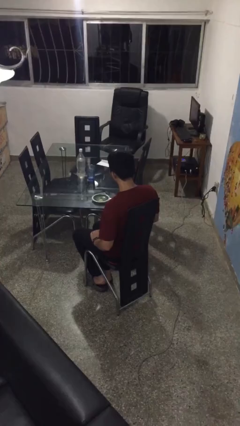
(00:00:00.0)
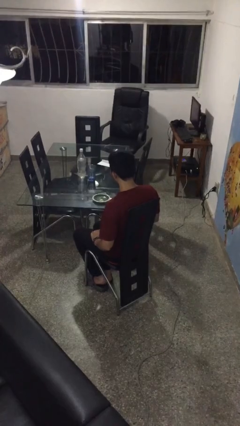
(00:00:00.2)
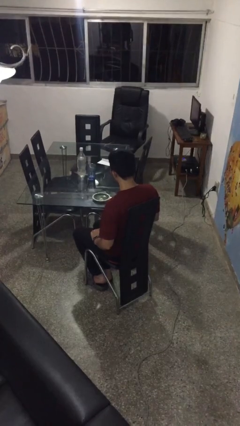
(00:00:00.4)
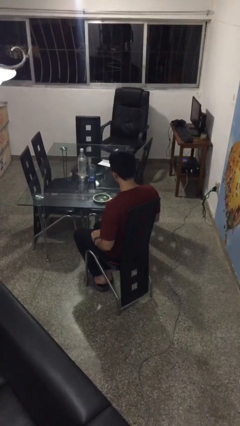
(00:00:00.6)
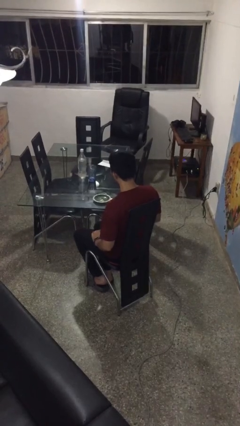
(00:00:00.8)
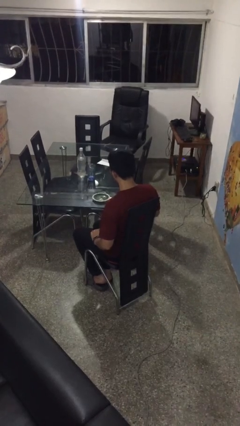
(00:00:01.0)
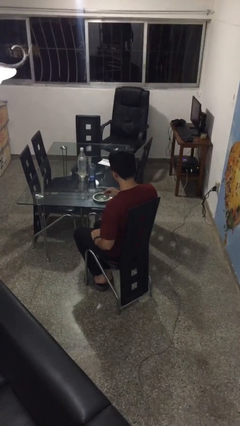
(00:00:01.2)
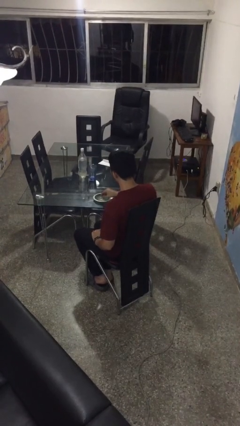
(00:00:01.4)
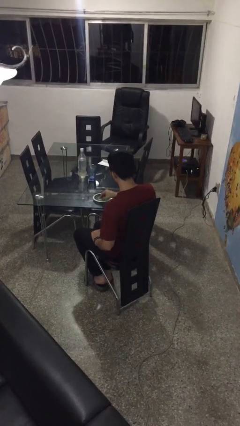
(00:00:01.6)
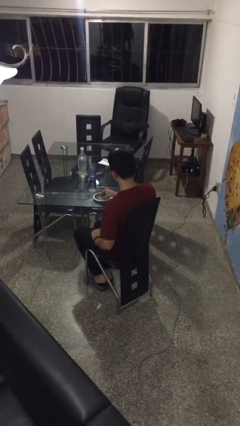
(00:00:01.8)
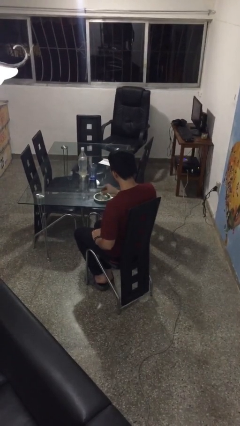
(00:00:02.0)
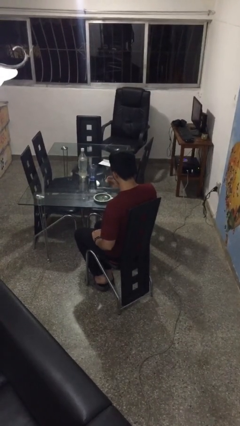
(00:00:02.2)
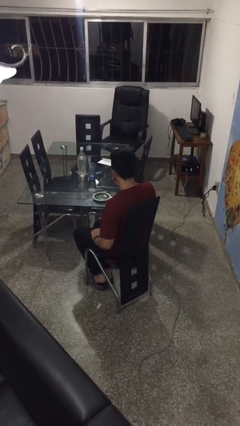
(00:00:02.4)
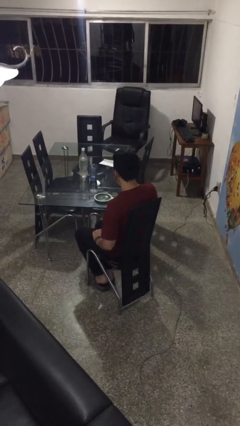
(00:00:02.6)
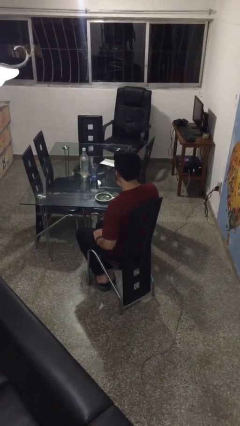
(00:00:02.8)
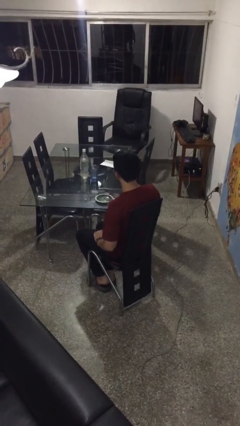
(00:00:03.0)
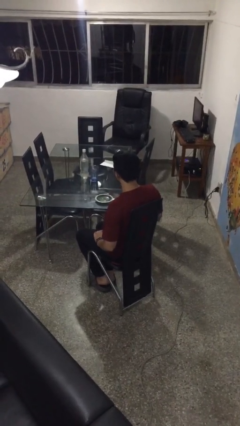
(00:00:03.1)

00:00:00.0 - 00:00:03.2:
person eats with hands

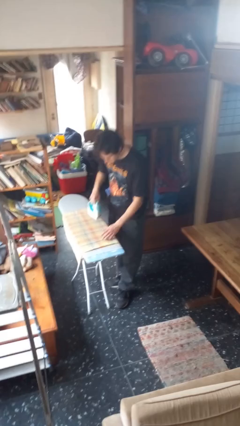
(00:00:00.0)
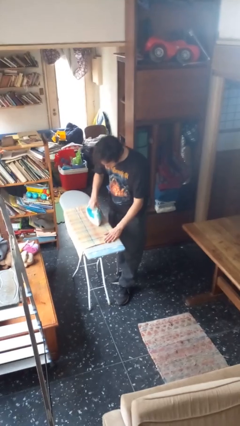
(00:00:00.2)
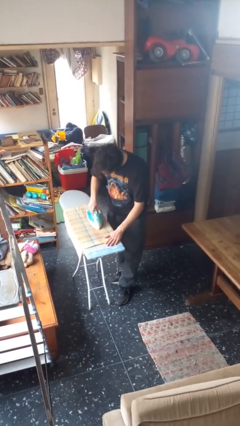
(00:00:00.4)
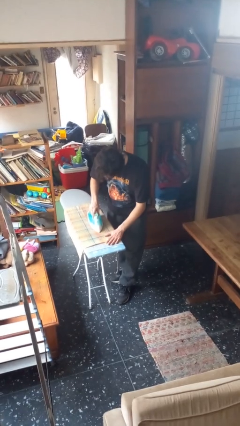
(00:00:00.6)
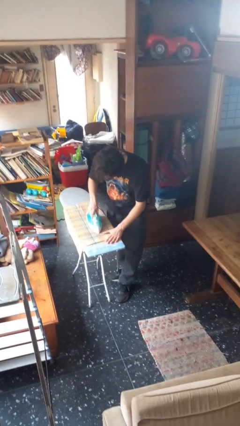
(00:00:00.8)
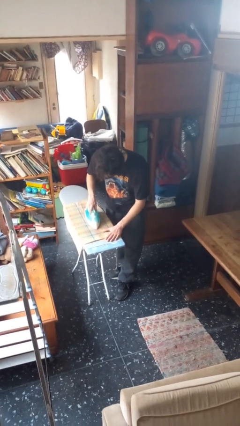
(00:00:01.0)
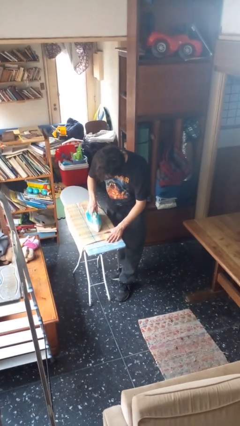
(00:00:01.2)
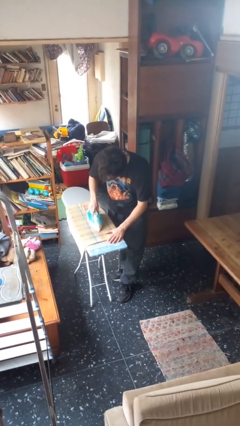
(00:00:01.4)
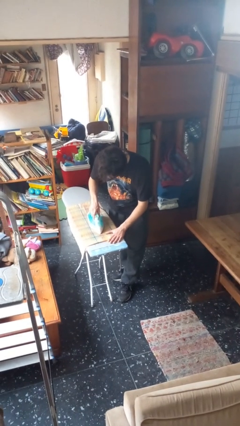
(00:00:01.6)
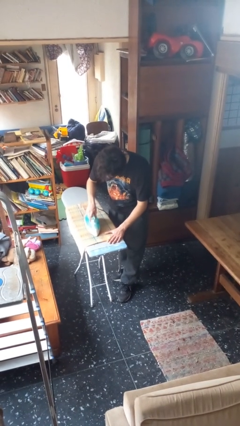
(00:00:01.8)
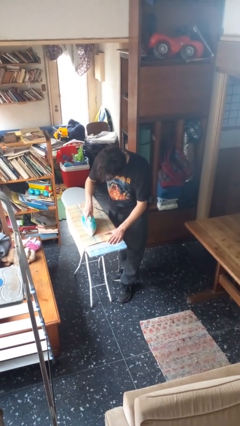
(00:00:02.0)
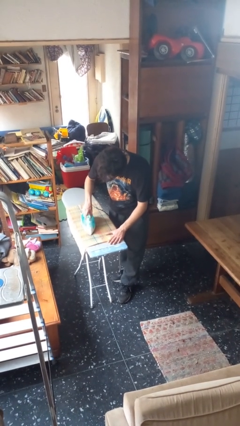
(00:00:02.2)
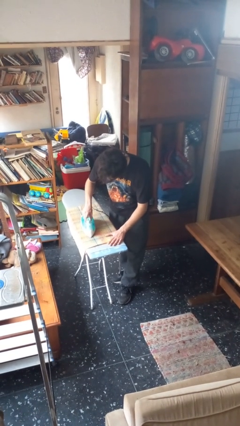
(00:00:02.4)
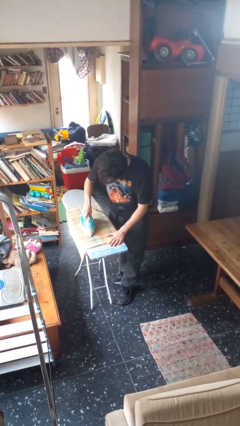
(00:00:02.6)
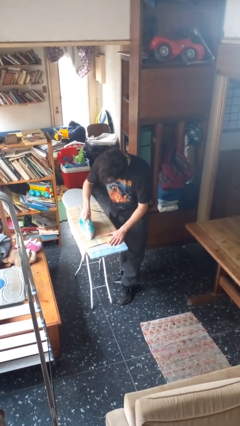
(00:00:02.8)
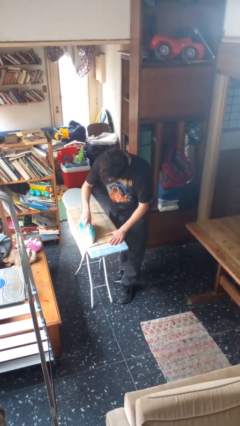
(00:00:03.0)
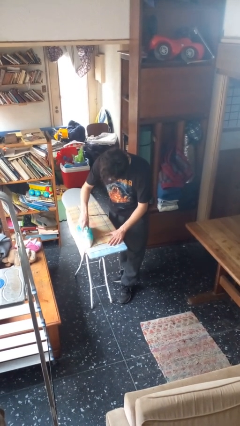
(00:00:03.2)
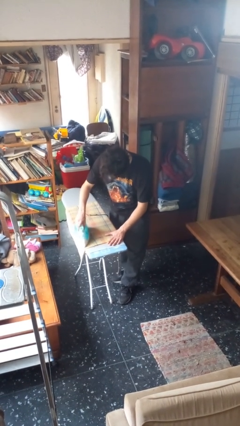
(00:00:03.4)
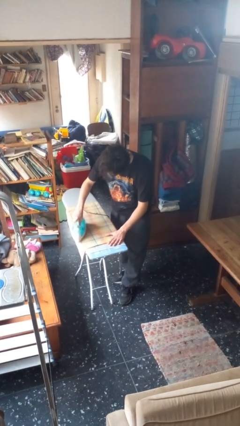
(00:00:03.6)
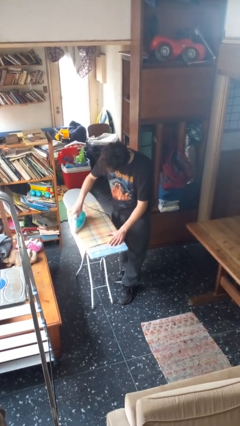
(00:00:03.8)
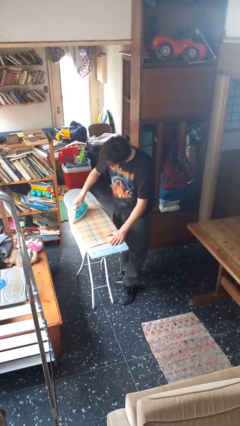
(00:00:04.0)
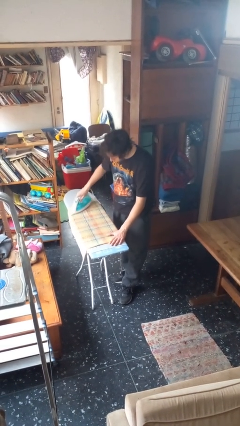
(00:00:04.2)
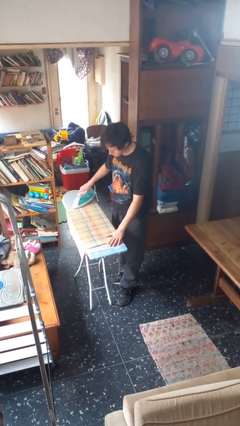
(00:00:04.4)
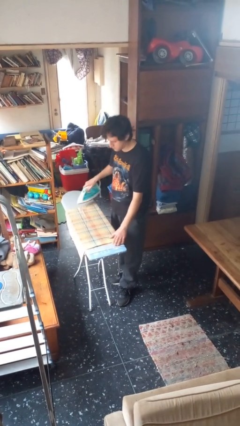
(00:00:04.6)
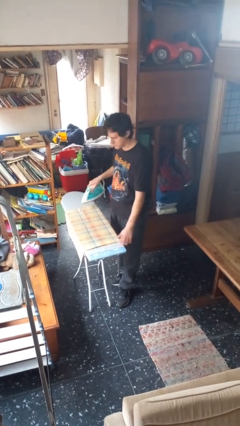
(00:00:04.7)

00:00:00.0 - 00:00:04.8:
person irons clothes

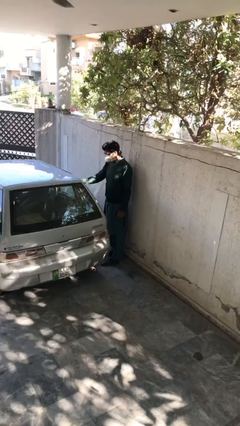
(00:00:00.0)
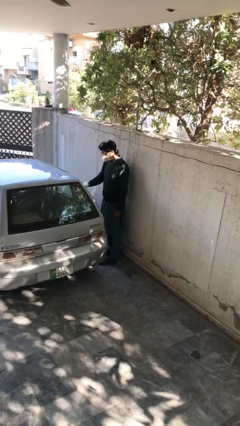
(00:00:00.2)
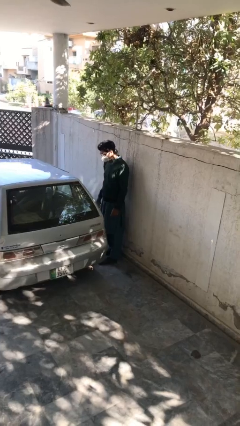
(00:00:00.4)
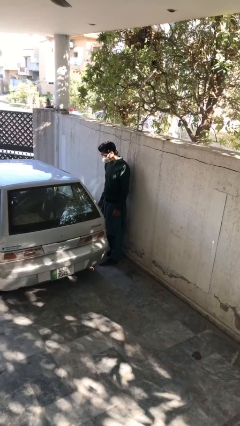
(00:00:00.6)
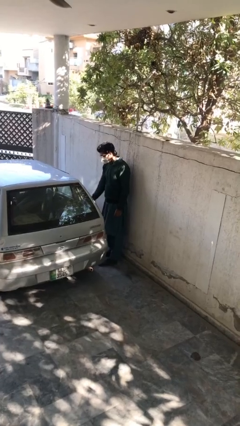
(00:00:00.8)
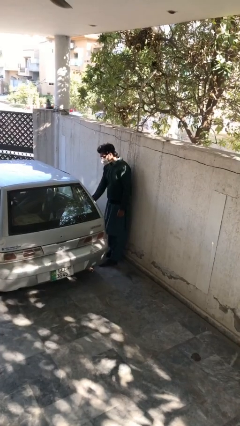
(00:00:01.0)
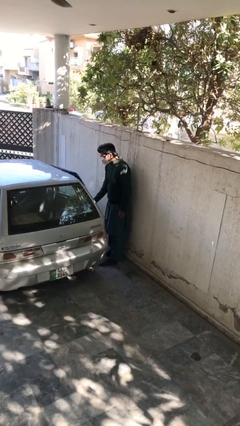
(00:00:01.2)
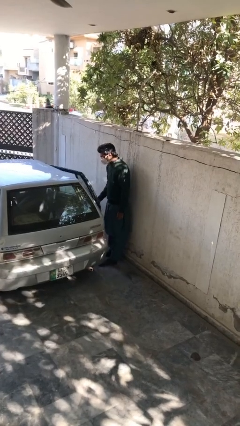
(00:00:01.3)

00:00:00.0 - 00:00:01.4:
person opens car door

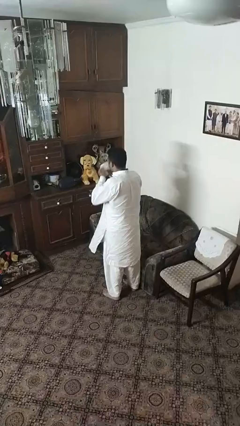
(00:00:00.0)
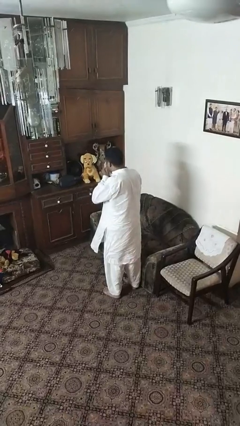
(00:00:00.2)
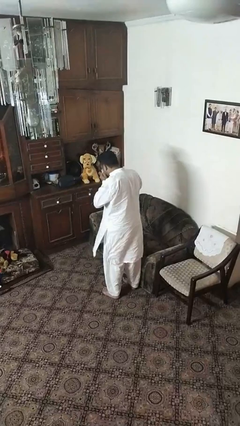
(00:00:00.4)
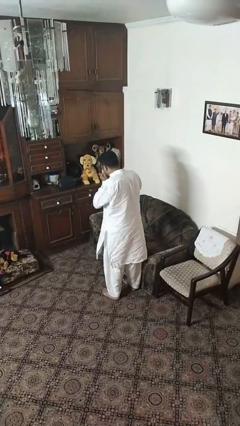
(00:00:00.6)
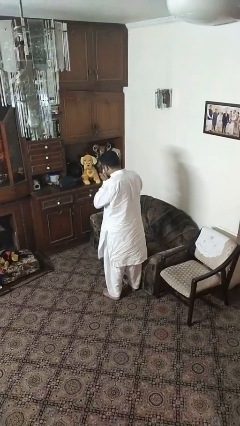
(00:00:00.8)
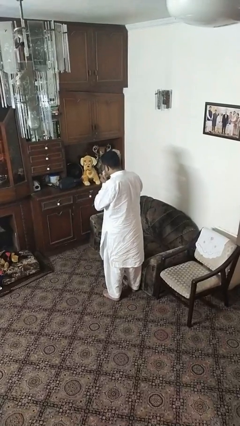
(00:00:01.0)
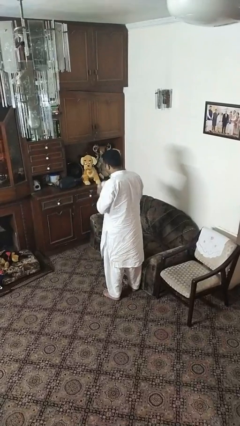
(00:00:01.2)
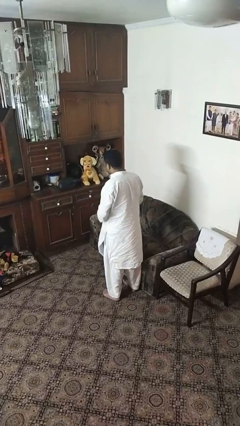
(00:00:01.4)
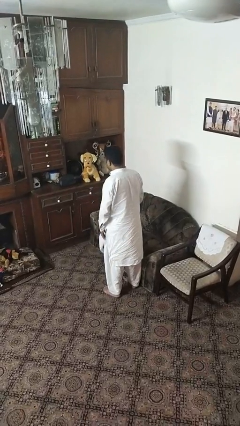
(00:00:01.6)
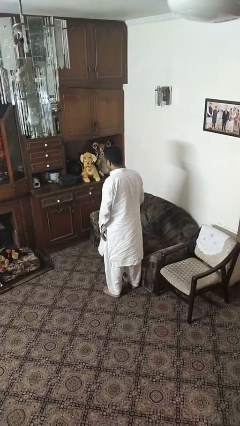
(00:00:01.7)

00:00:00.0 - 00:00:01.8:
person blows nose

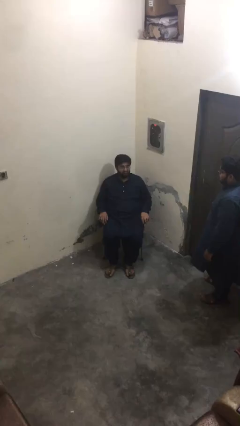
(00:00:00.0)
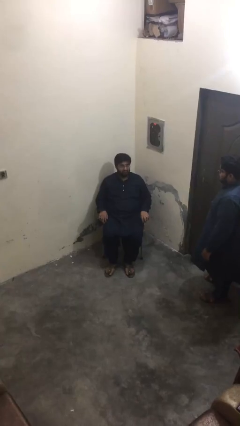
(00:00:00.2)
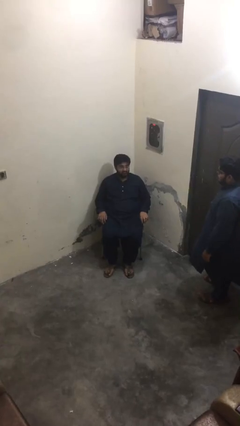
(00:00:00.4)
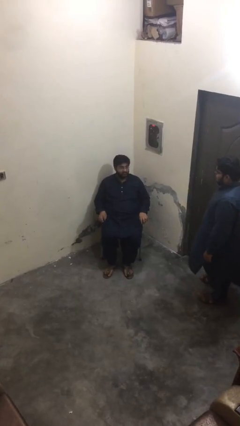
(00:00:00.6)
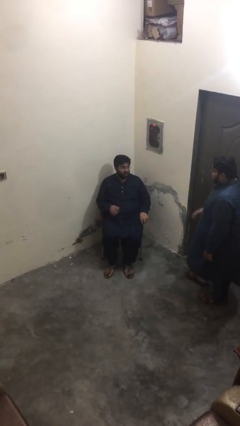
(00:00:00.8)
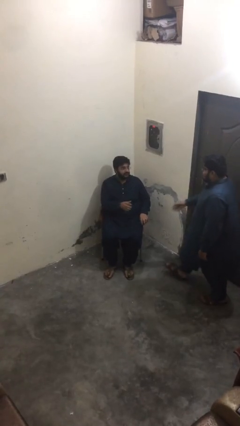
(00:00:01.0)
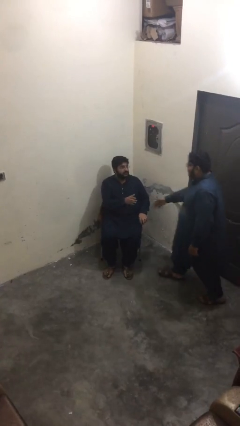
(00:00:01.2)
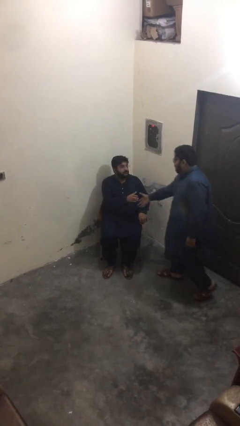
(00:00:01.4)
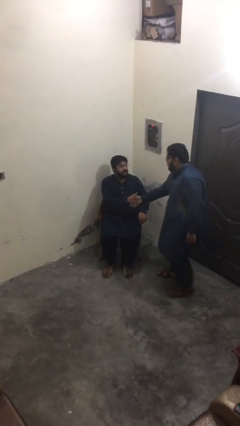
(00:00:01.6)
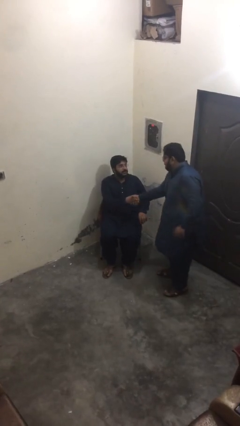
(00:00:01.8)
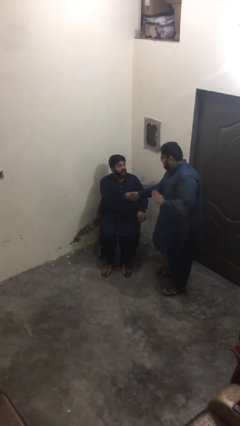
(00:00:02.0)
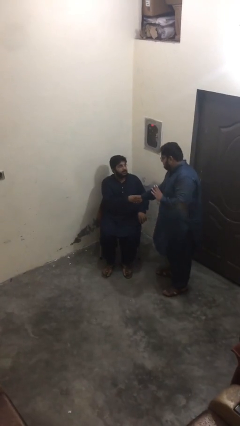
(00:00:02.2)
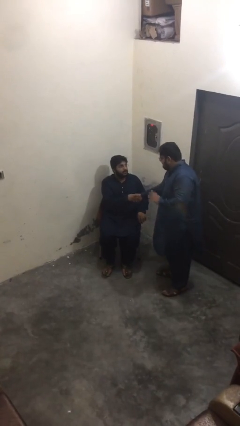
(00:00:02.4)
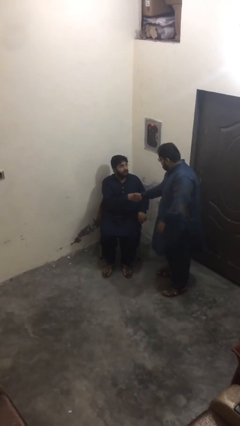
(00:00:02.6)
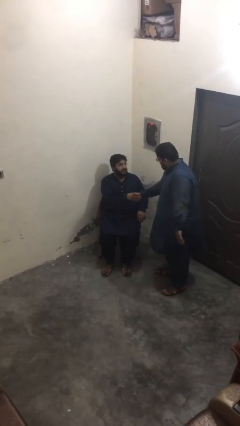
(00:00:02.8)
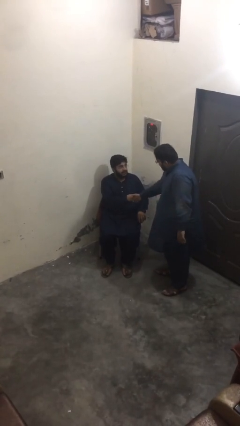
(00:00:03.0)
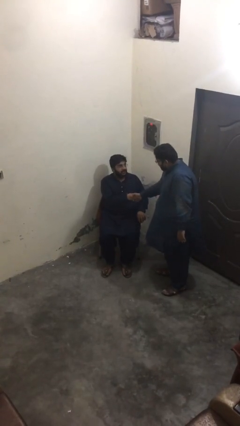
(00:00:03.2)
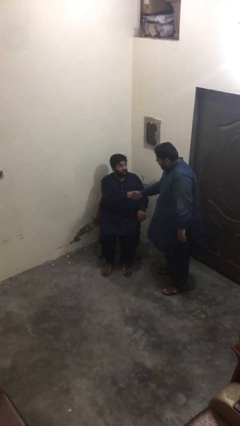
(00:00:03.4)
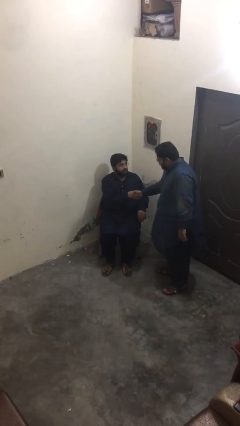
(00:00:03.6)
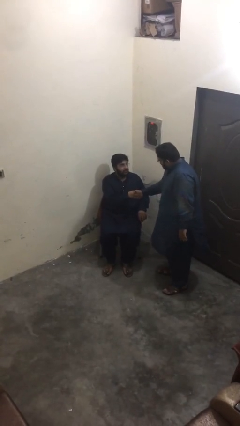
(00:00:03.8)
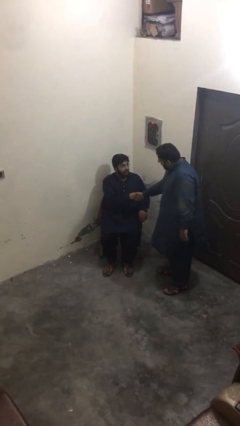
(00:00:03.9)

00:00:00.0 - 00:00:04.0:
person shakes hand

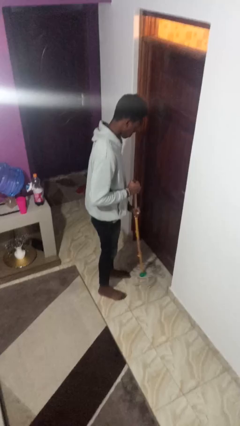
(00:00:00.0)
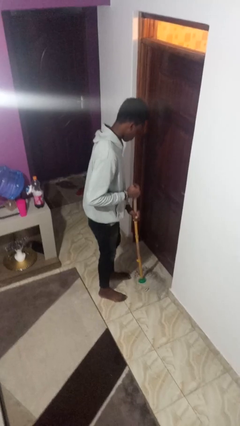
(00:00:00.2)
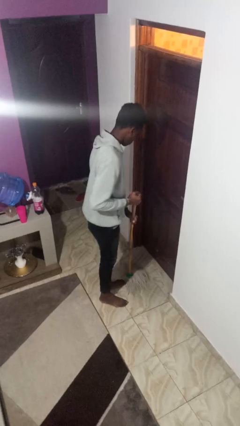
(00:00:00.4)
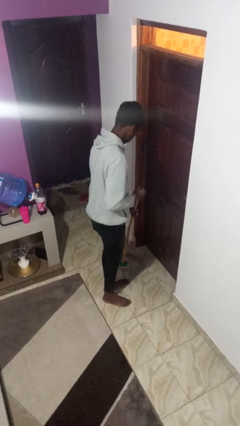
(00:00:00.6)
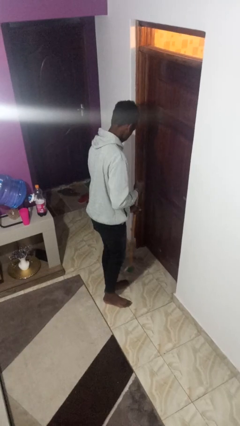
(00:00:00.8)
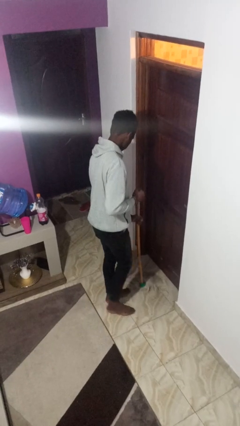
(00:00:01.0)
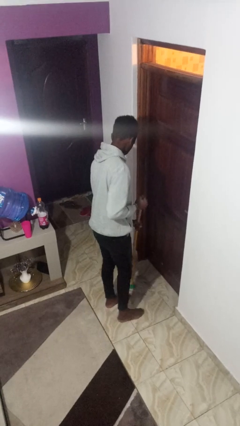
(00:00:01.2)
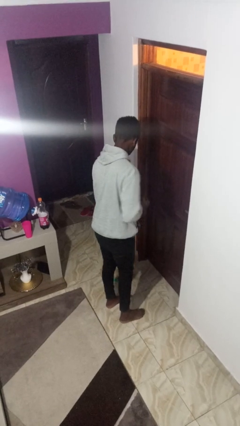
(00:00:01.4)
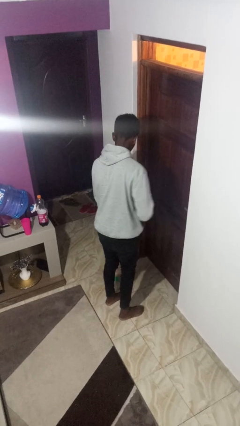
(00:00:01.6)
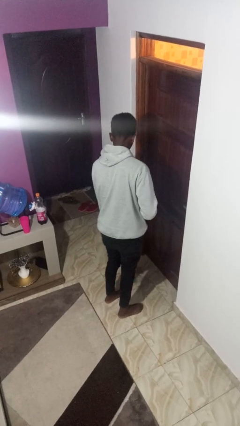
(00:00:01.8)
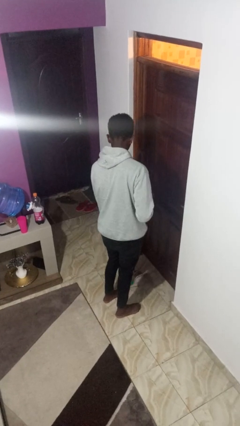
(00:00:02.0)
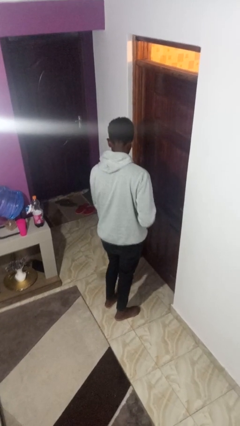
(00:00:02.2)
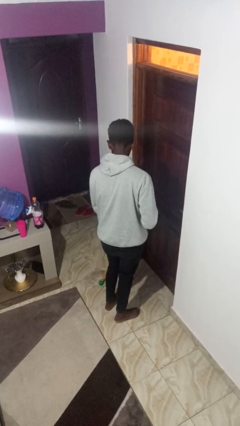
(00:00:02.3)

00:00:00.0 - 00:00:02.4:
person mops
